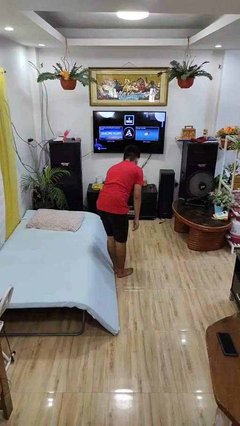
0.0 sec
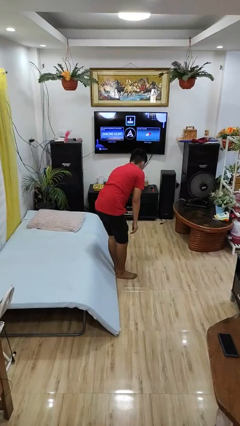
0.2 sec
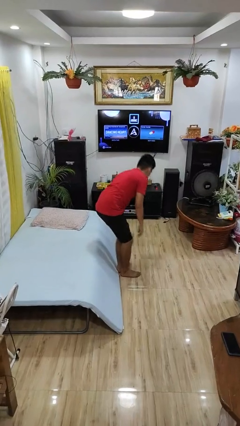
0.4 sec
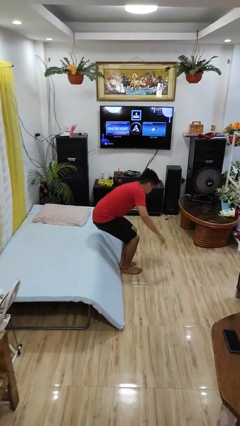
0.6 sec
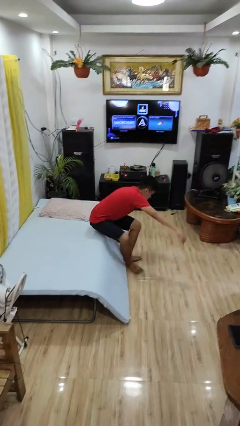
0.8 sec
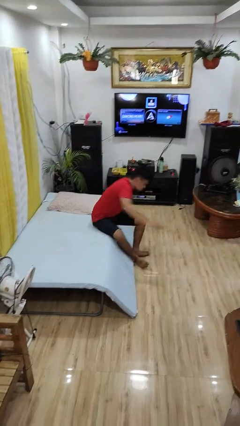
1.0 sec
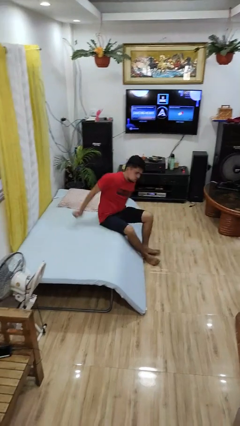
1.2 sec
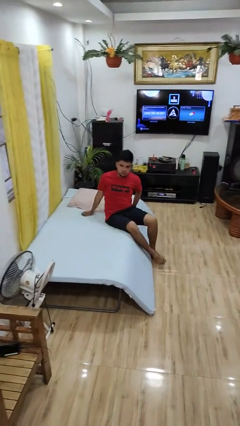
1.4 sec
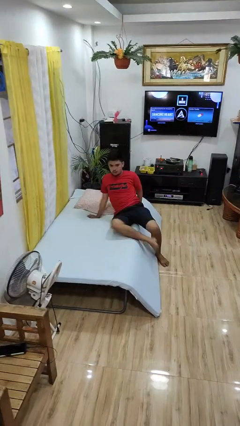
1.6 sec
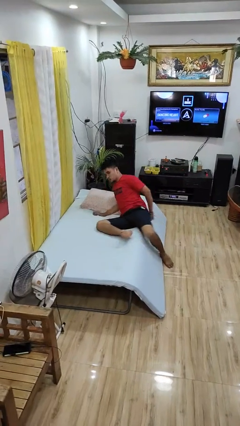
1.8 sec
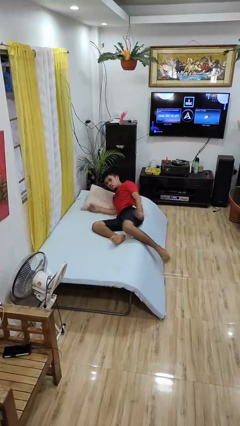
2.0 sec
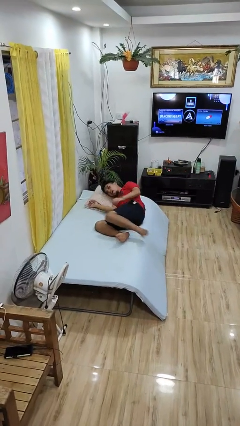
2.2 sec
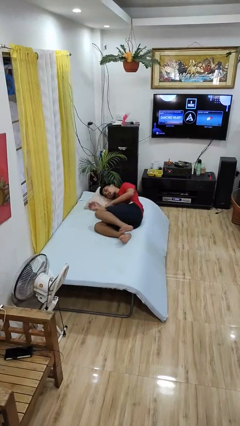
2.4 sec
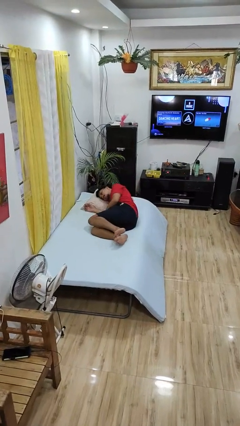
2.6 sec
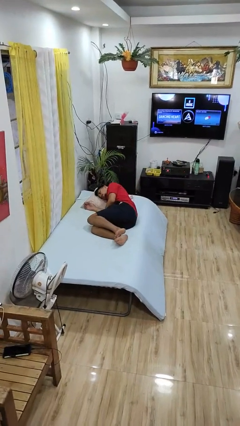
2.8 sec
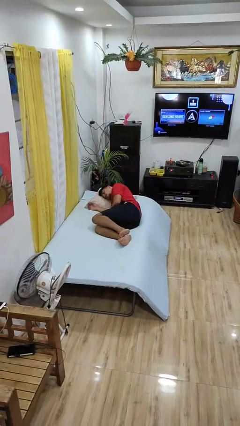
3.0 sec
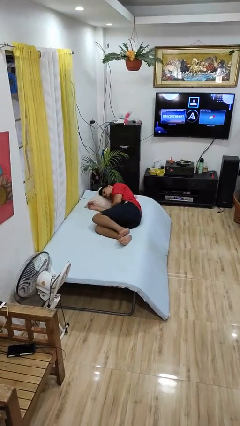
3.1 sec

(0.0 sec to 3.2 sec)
person lies down on bed

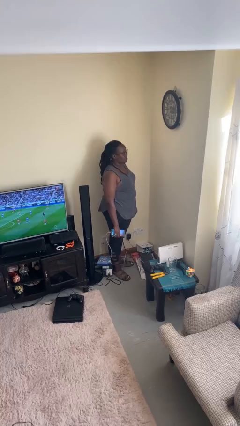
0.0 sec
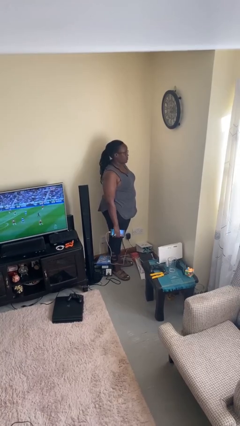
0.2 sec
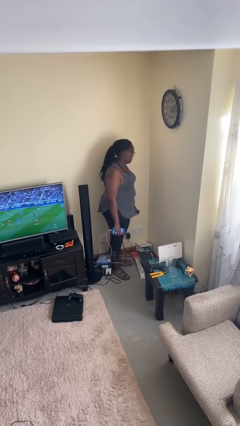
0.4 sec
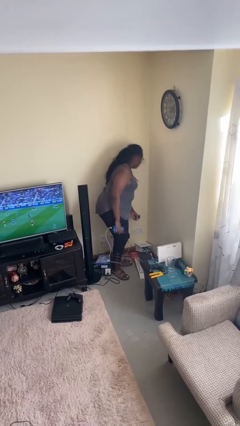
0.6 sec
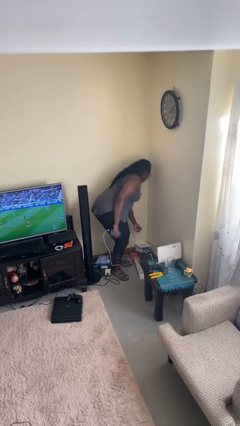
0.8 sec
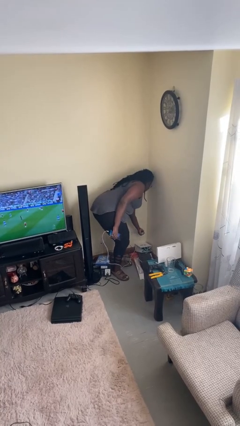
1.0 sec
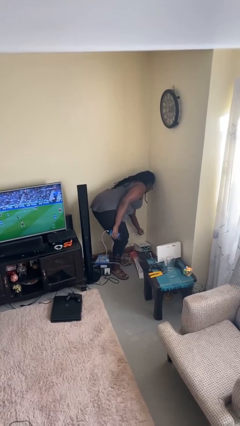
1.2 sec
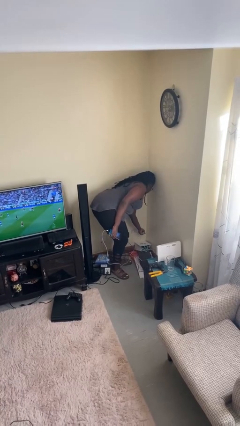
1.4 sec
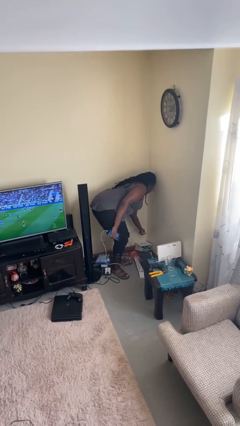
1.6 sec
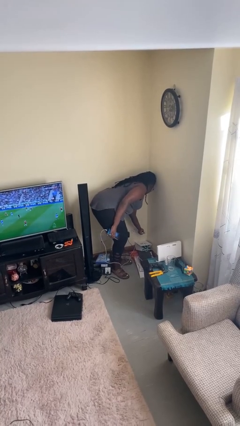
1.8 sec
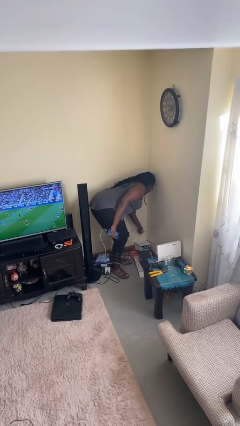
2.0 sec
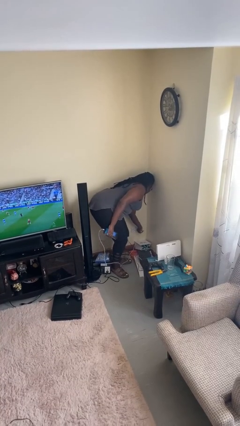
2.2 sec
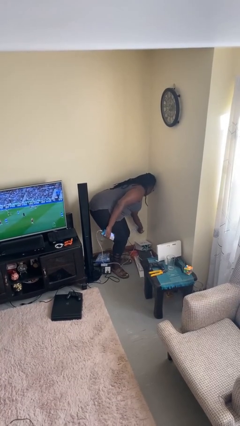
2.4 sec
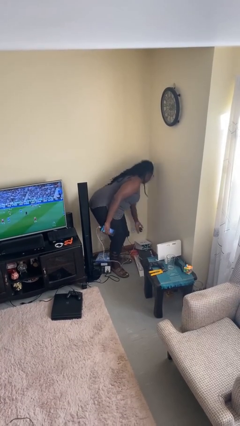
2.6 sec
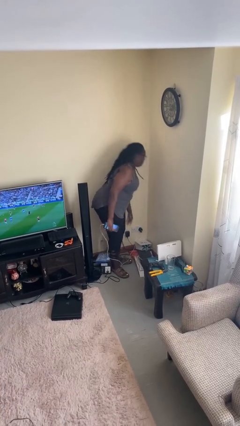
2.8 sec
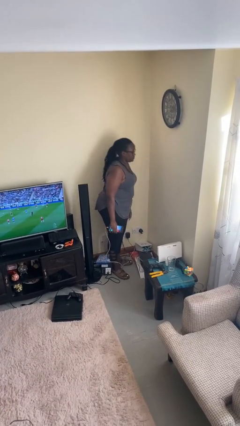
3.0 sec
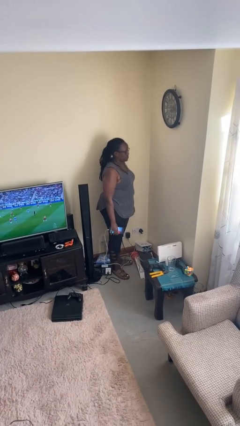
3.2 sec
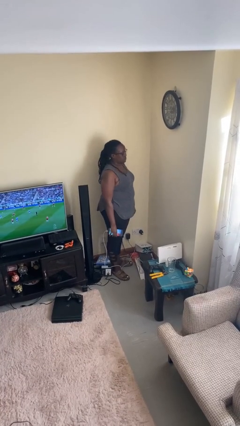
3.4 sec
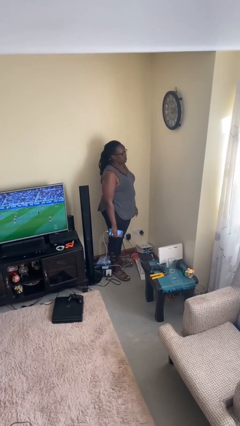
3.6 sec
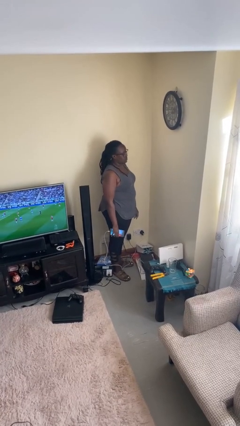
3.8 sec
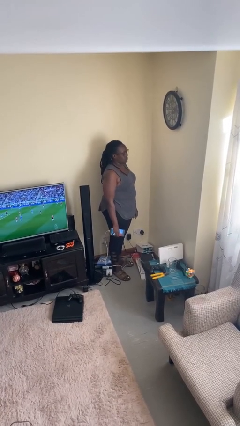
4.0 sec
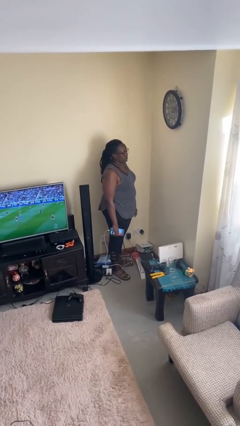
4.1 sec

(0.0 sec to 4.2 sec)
person plugs into electrical socket

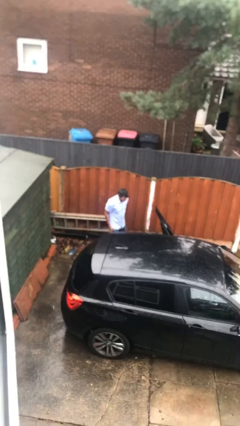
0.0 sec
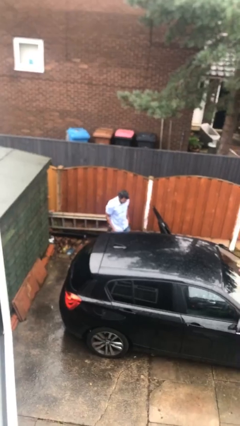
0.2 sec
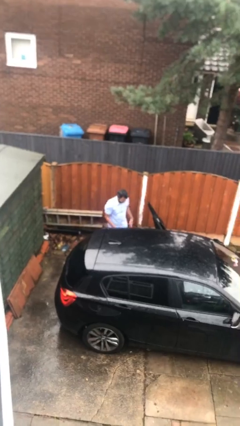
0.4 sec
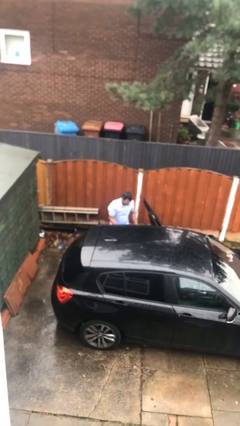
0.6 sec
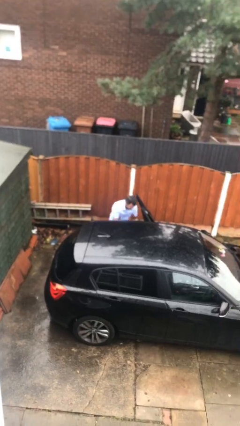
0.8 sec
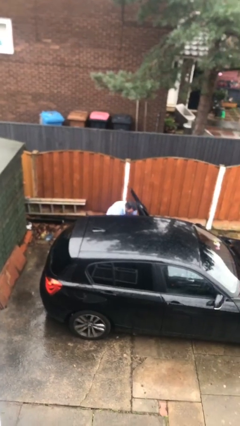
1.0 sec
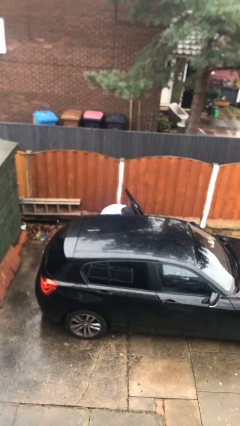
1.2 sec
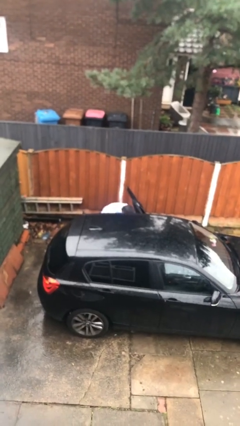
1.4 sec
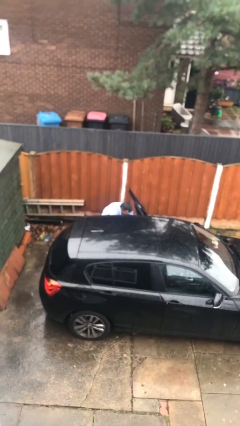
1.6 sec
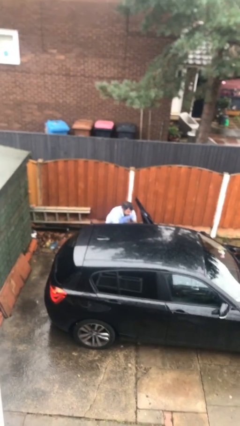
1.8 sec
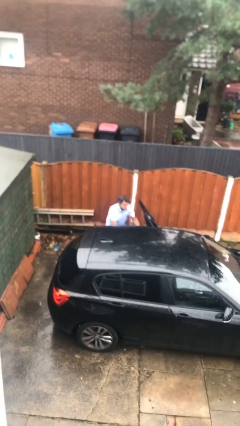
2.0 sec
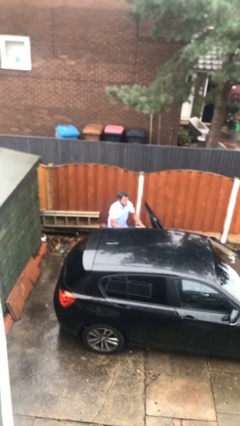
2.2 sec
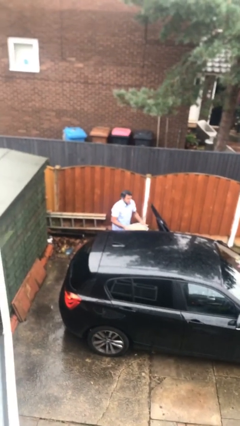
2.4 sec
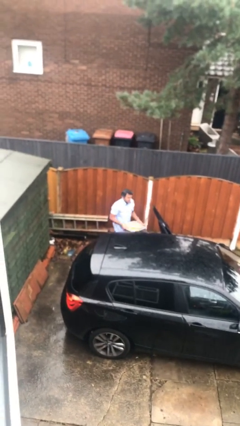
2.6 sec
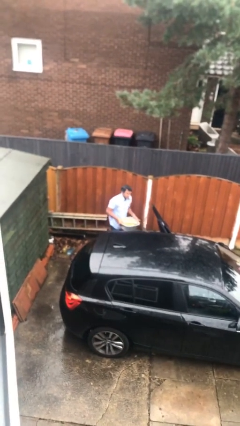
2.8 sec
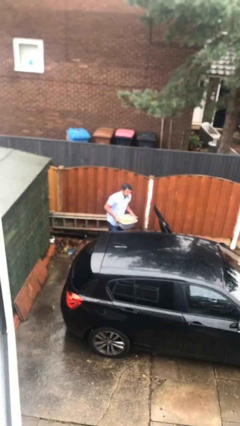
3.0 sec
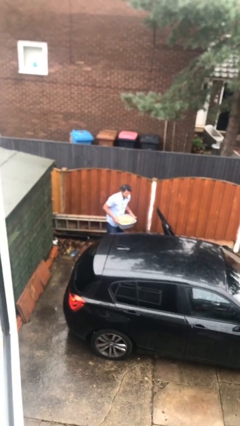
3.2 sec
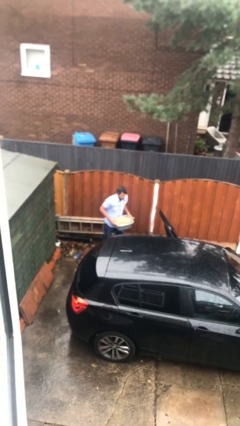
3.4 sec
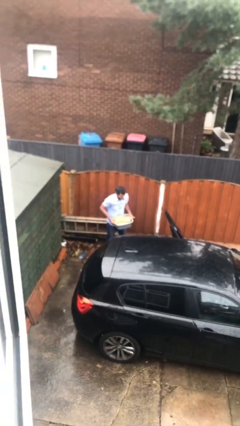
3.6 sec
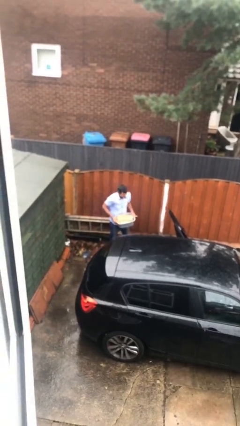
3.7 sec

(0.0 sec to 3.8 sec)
person unloads car

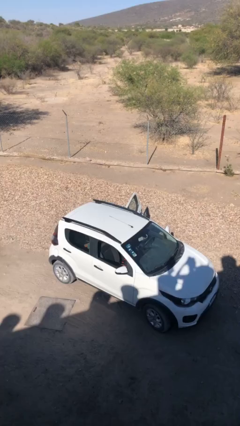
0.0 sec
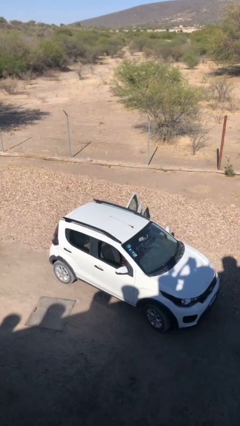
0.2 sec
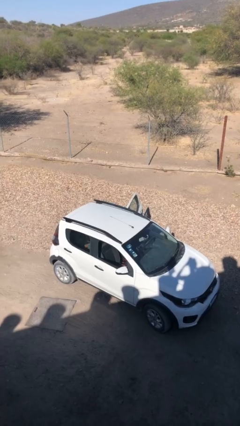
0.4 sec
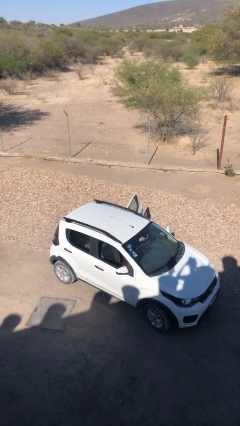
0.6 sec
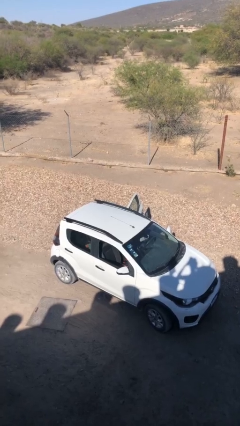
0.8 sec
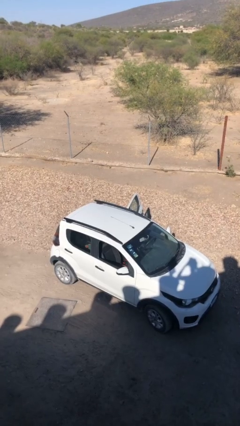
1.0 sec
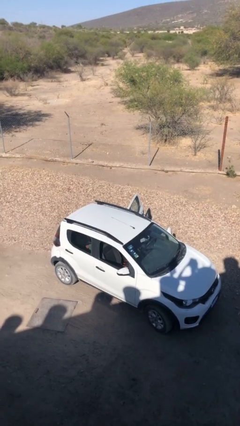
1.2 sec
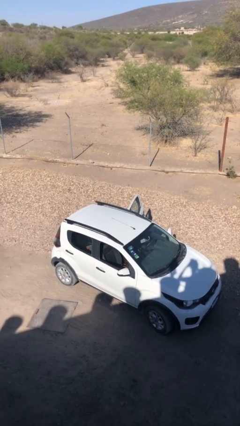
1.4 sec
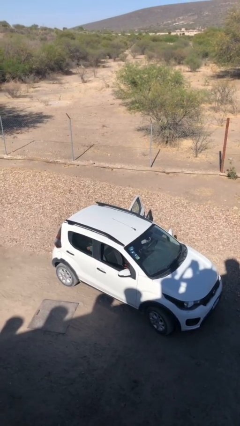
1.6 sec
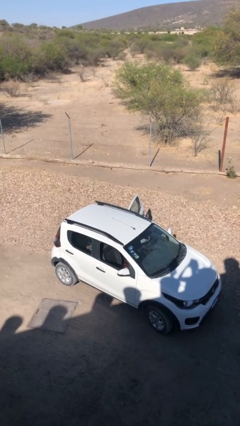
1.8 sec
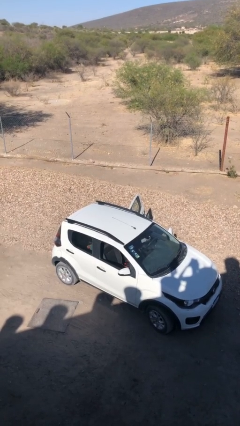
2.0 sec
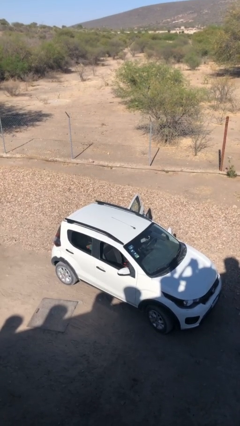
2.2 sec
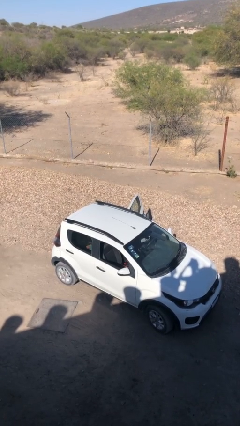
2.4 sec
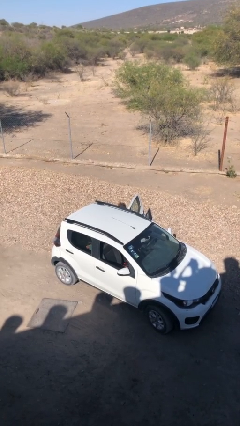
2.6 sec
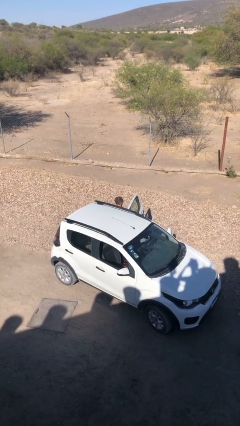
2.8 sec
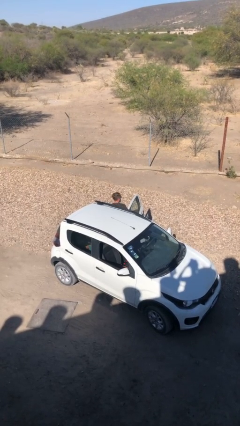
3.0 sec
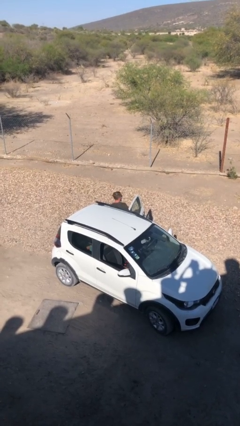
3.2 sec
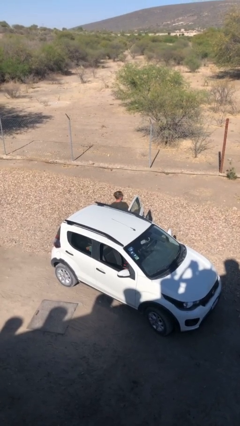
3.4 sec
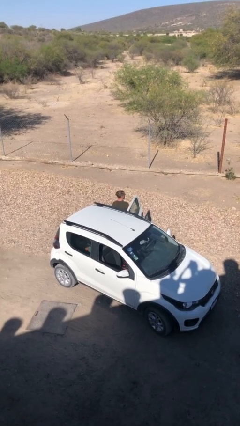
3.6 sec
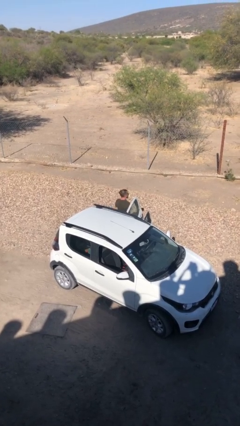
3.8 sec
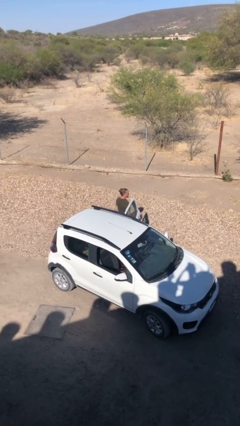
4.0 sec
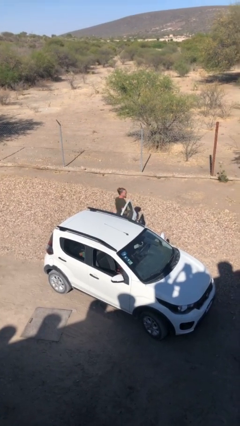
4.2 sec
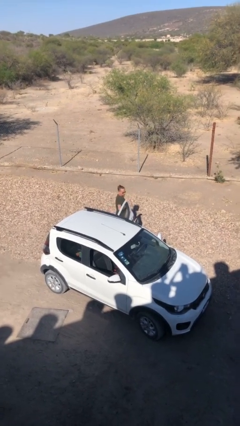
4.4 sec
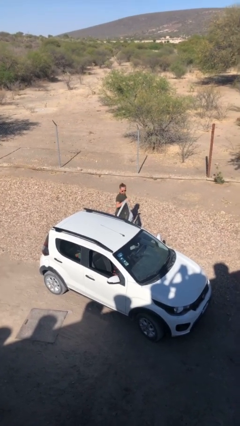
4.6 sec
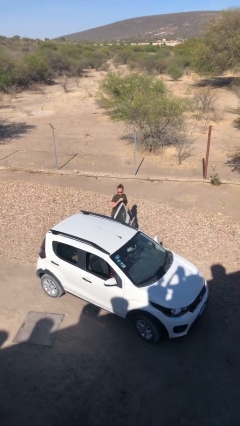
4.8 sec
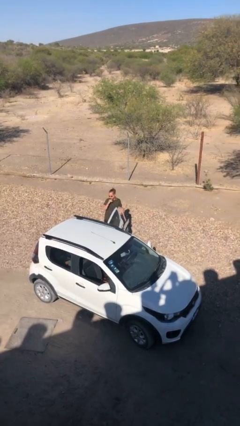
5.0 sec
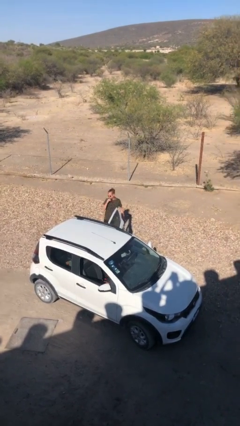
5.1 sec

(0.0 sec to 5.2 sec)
person exits car

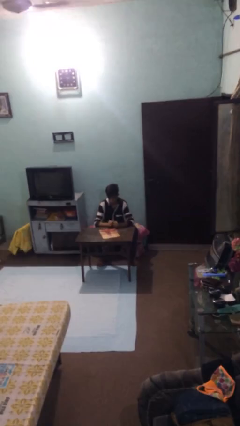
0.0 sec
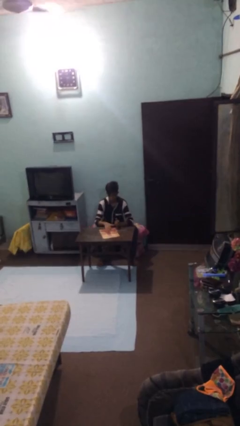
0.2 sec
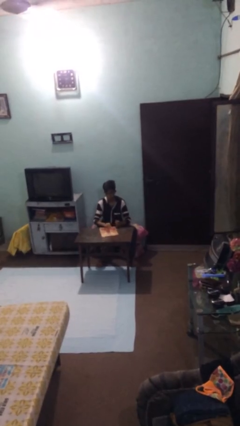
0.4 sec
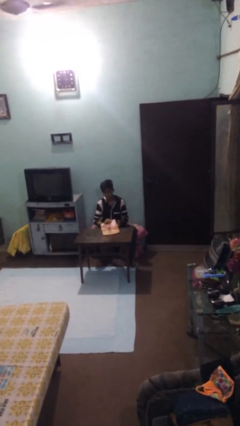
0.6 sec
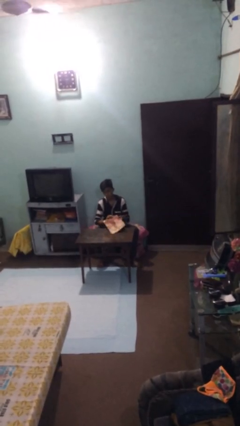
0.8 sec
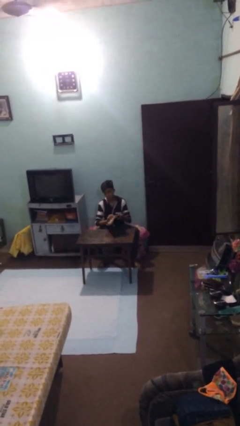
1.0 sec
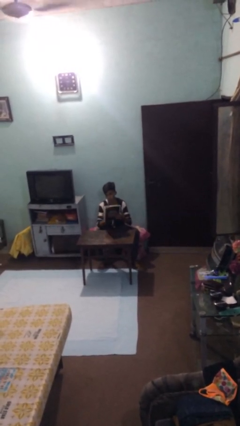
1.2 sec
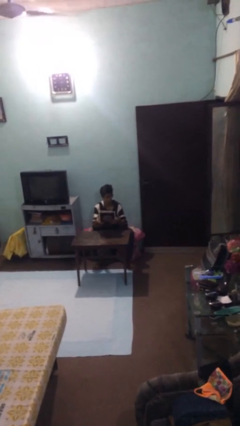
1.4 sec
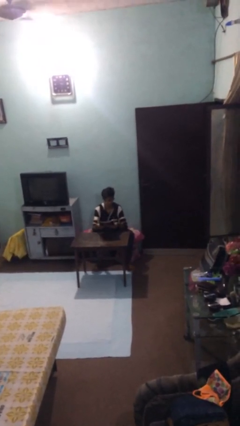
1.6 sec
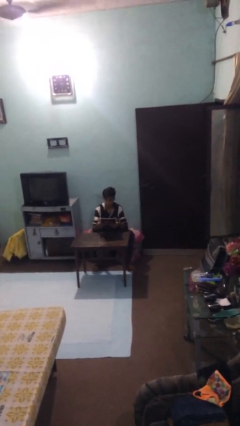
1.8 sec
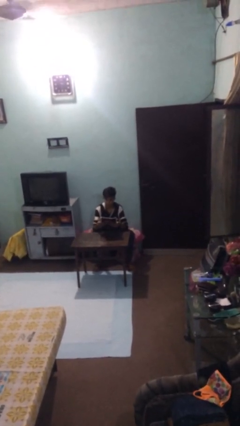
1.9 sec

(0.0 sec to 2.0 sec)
person picks up object from table
